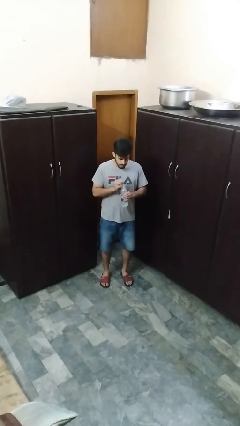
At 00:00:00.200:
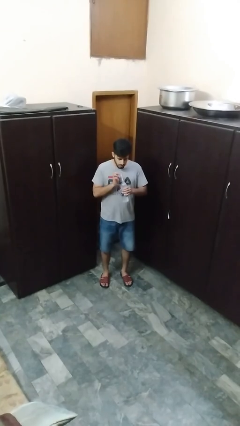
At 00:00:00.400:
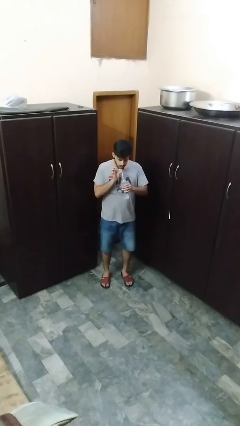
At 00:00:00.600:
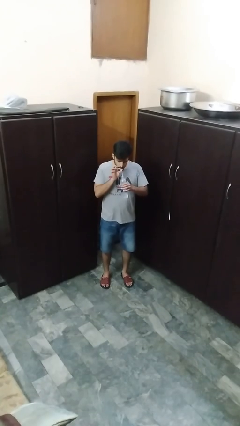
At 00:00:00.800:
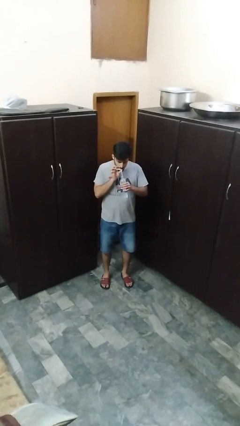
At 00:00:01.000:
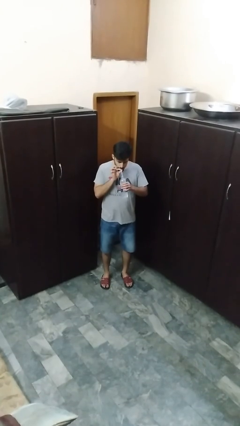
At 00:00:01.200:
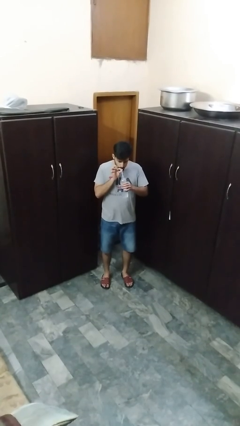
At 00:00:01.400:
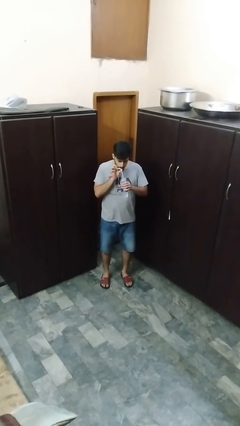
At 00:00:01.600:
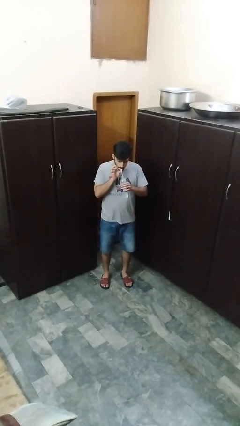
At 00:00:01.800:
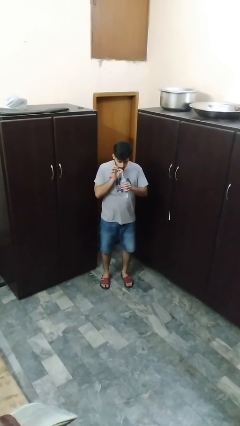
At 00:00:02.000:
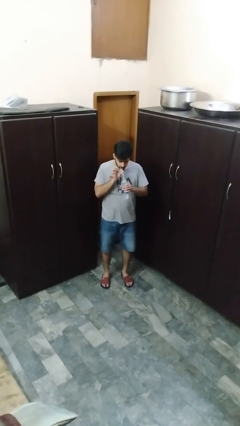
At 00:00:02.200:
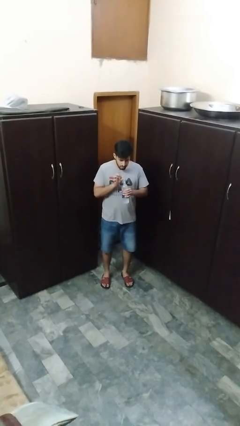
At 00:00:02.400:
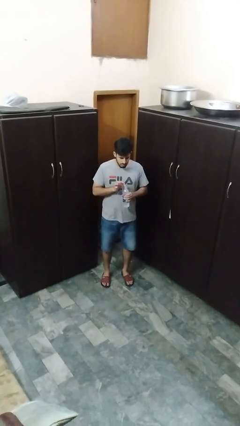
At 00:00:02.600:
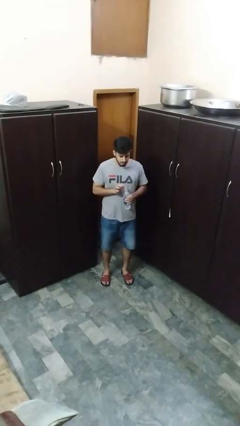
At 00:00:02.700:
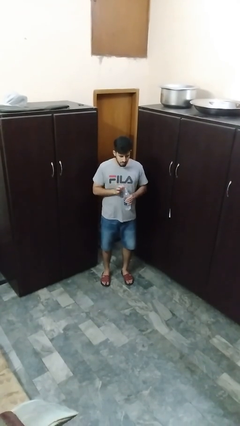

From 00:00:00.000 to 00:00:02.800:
person drinks from straw

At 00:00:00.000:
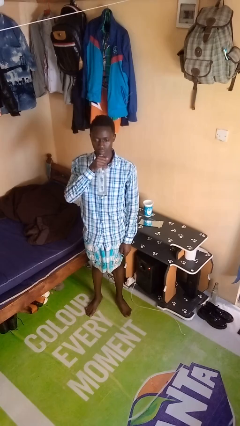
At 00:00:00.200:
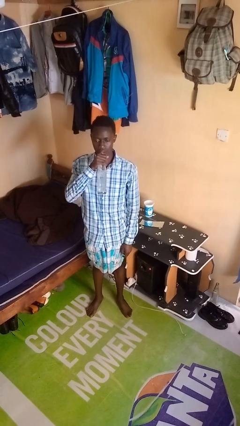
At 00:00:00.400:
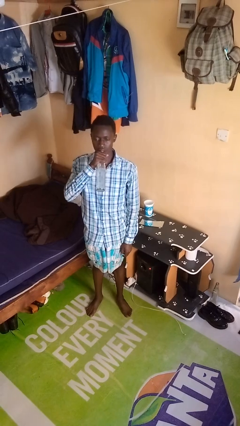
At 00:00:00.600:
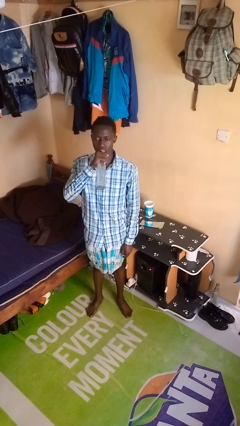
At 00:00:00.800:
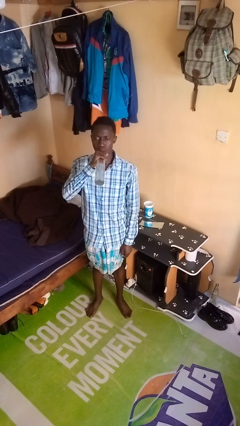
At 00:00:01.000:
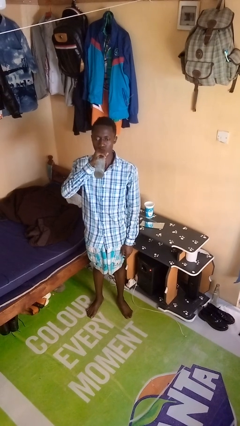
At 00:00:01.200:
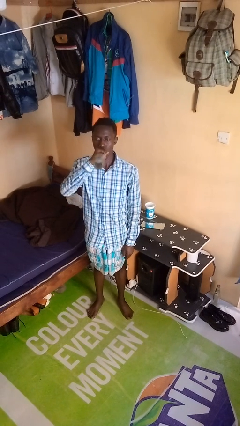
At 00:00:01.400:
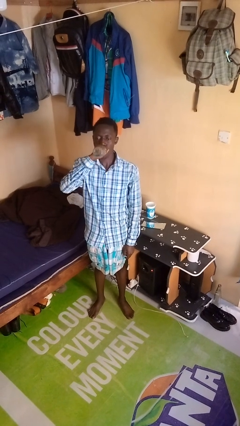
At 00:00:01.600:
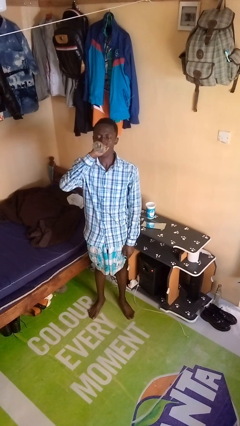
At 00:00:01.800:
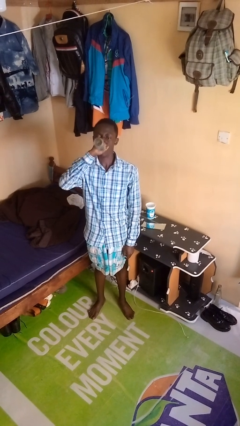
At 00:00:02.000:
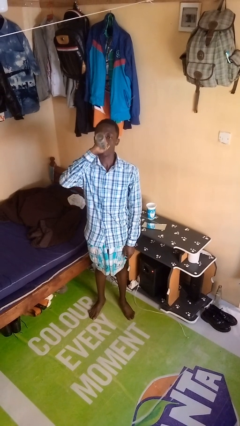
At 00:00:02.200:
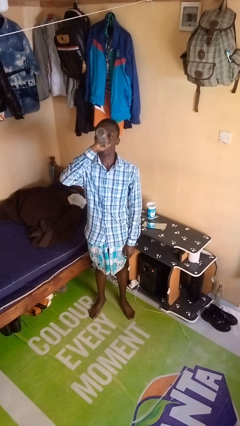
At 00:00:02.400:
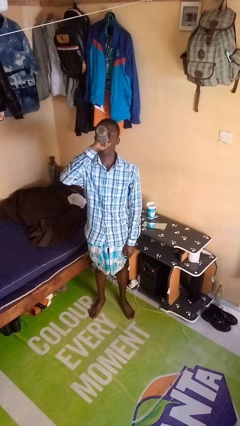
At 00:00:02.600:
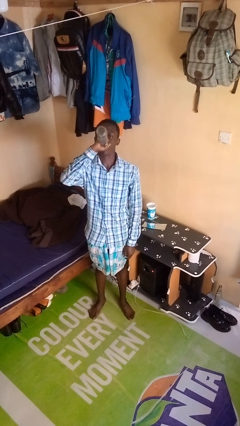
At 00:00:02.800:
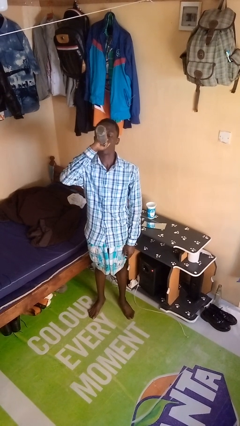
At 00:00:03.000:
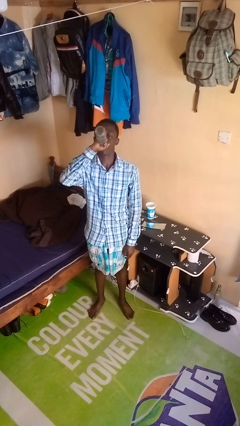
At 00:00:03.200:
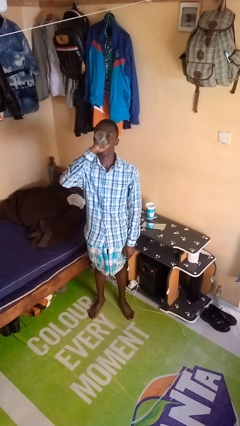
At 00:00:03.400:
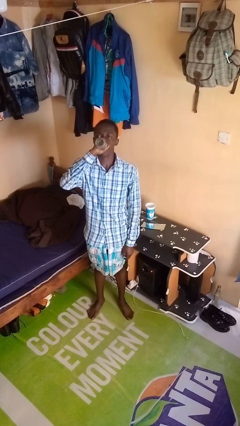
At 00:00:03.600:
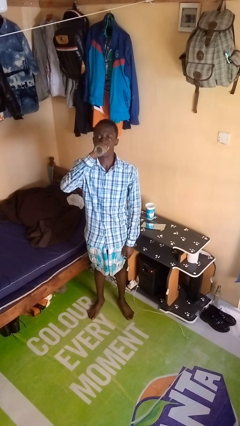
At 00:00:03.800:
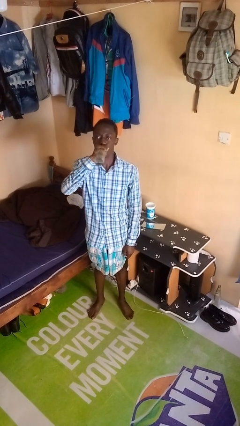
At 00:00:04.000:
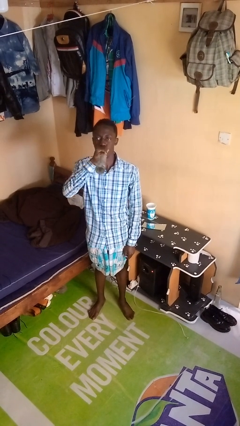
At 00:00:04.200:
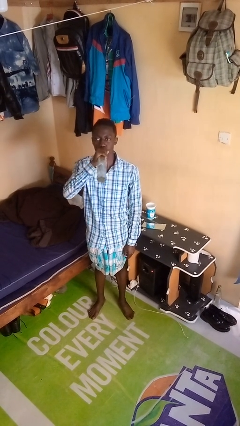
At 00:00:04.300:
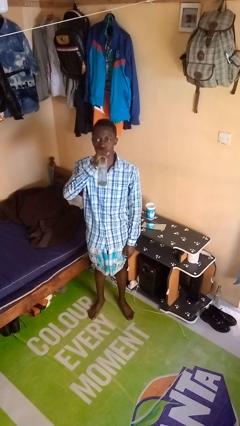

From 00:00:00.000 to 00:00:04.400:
person drinks from bottle

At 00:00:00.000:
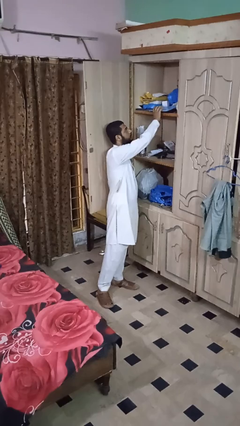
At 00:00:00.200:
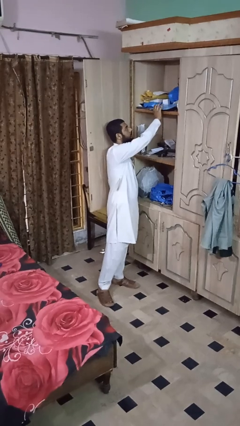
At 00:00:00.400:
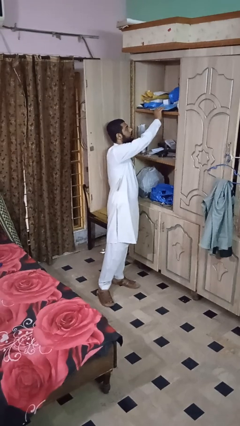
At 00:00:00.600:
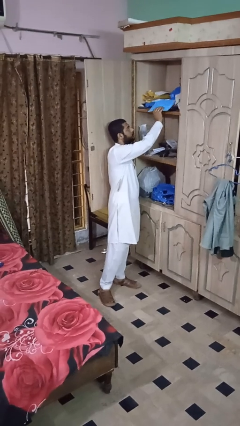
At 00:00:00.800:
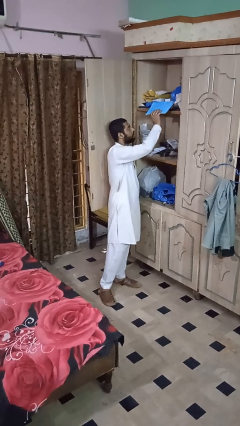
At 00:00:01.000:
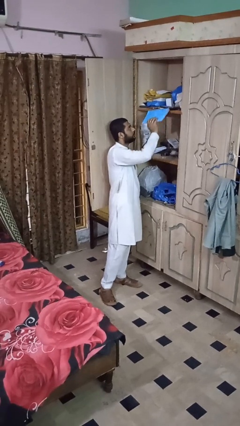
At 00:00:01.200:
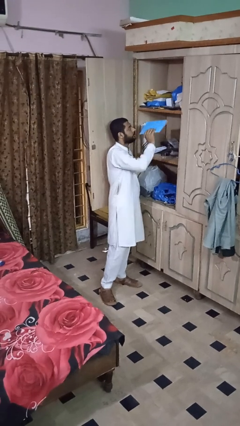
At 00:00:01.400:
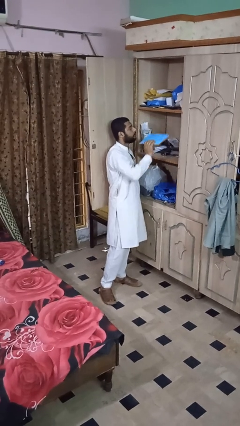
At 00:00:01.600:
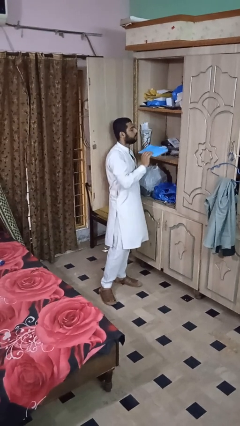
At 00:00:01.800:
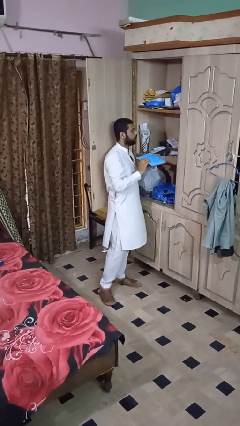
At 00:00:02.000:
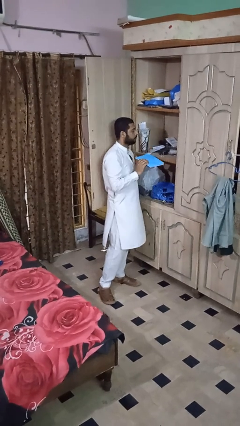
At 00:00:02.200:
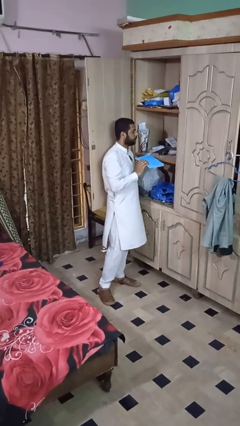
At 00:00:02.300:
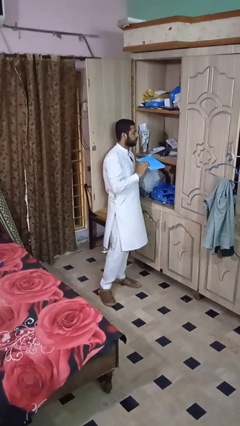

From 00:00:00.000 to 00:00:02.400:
person picks up object from shelf

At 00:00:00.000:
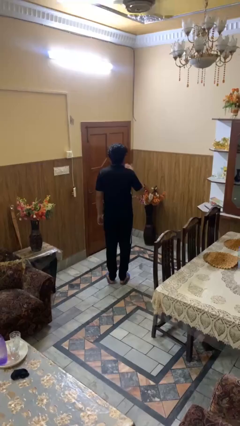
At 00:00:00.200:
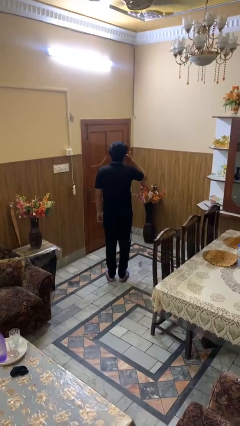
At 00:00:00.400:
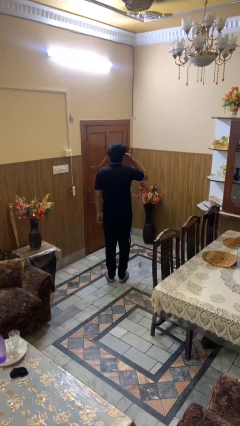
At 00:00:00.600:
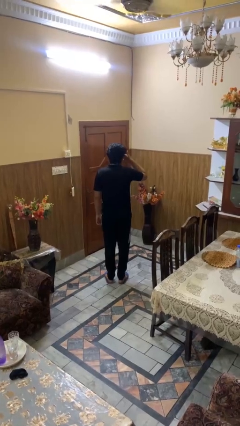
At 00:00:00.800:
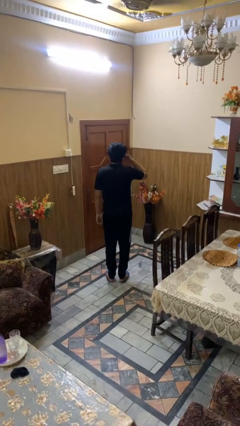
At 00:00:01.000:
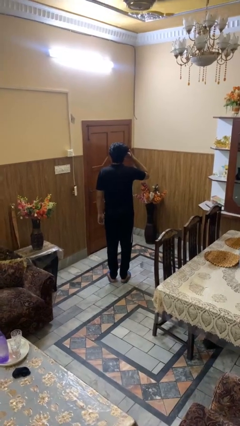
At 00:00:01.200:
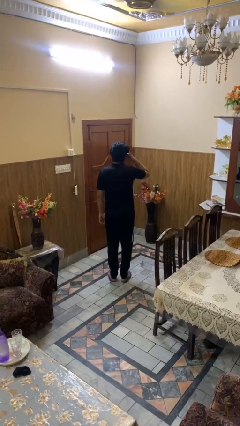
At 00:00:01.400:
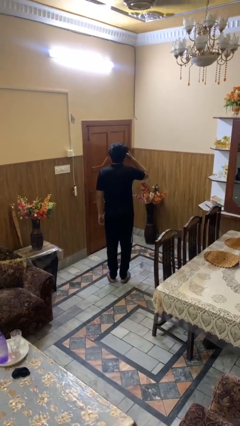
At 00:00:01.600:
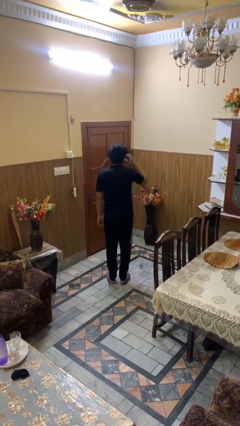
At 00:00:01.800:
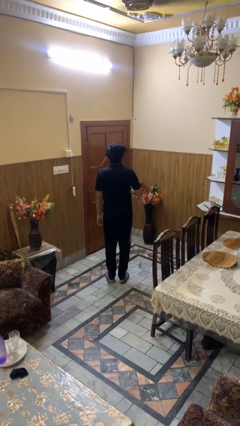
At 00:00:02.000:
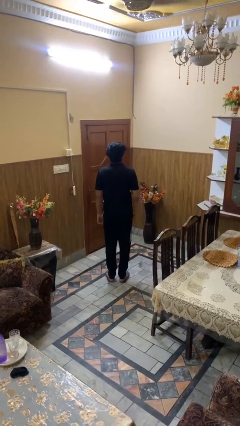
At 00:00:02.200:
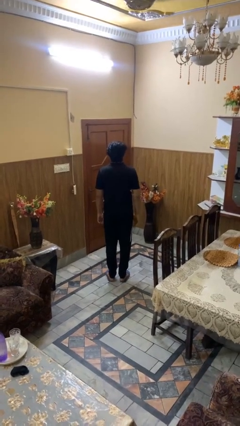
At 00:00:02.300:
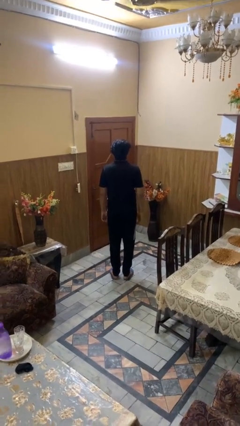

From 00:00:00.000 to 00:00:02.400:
person rubs eyes

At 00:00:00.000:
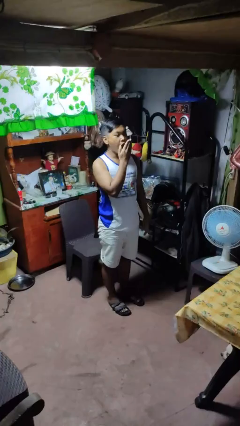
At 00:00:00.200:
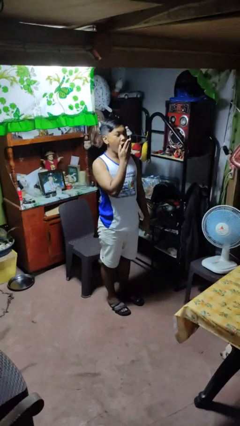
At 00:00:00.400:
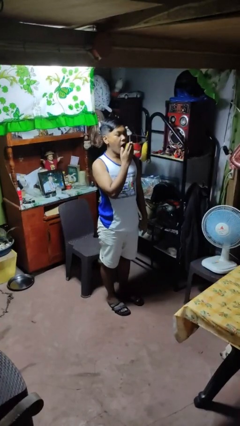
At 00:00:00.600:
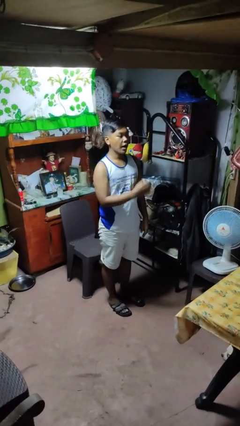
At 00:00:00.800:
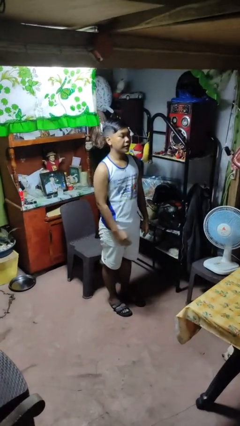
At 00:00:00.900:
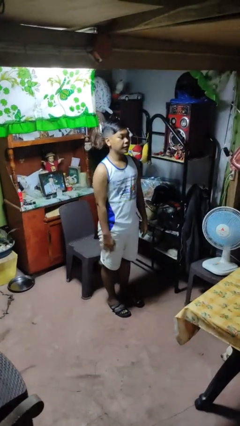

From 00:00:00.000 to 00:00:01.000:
person yawns

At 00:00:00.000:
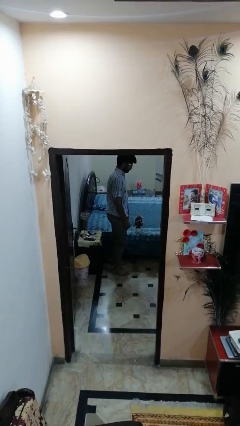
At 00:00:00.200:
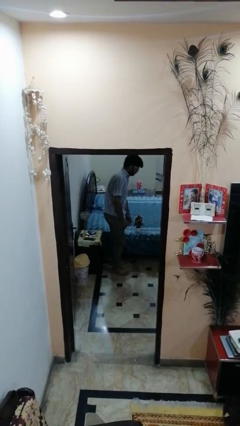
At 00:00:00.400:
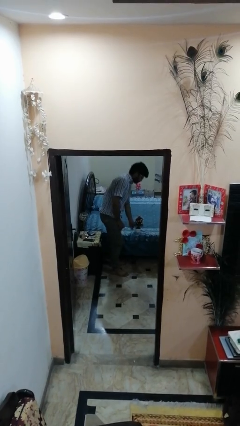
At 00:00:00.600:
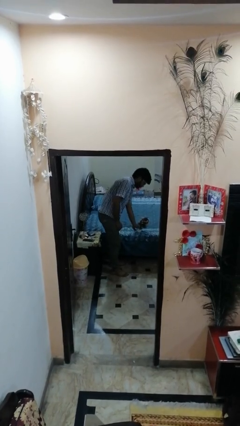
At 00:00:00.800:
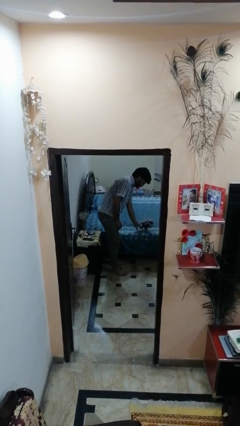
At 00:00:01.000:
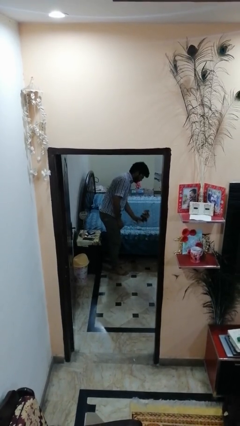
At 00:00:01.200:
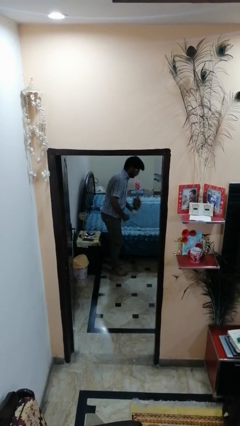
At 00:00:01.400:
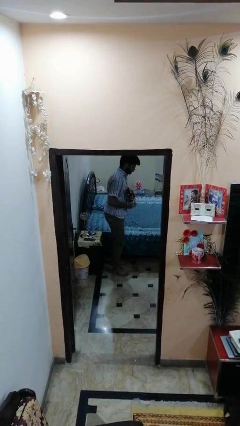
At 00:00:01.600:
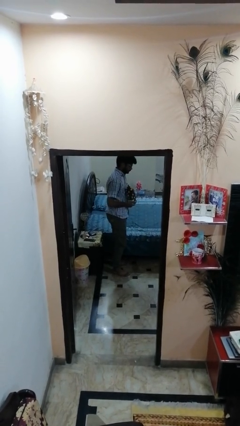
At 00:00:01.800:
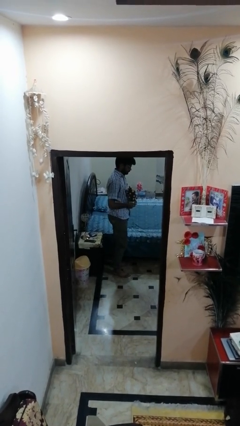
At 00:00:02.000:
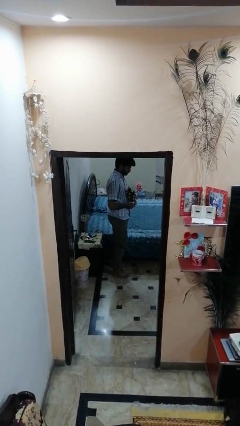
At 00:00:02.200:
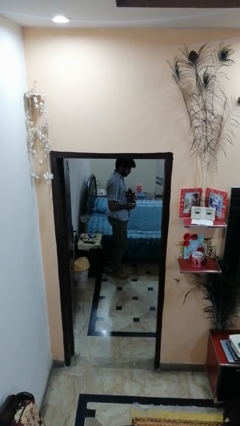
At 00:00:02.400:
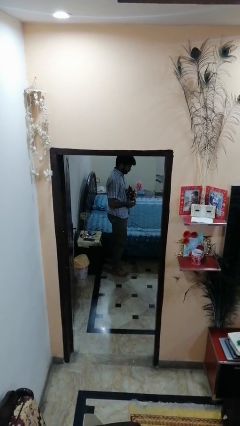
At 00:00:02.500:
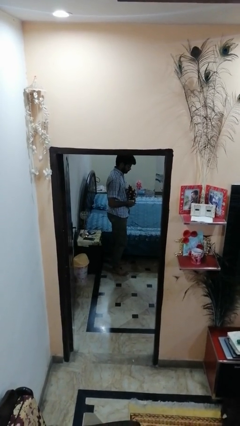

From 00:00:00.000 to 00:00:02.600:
person picks up object from bed

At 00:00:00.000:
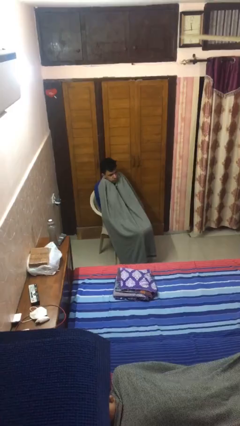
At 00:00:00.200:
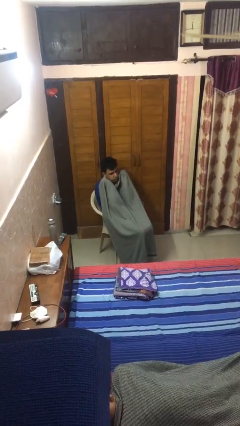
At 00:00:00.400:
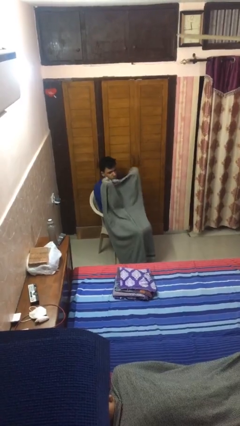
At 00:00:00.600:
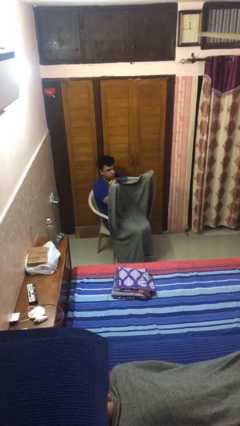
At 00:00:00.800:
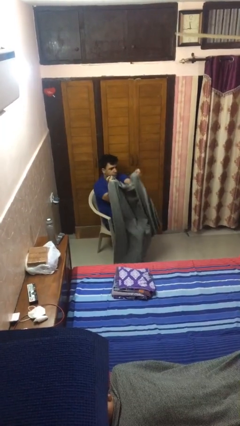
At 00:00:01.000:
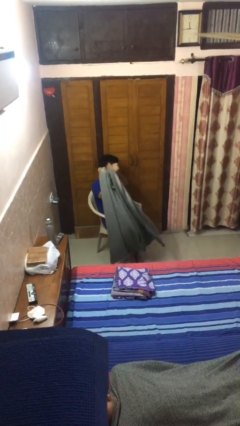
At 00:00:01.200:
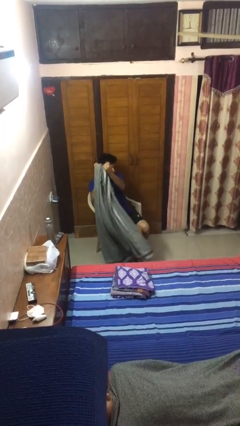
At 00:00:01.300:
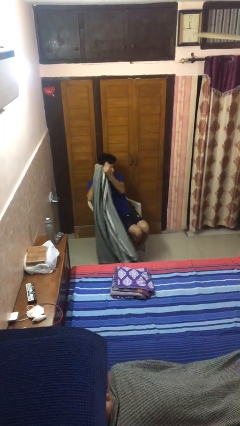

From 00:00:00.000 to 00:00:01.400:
person uncovers with blanket
